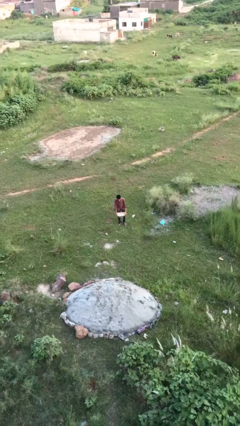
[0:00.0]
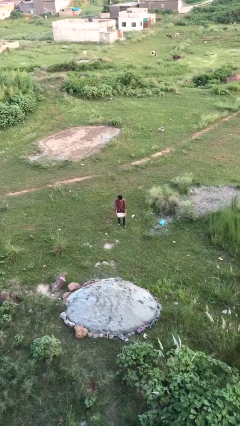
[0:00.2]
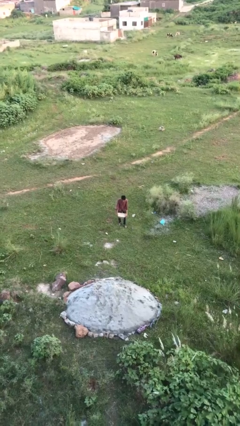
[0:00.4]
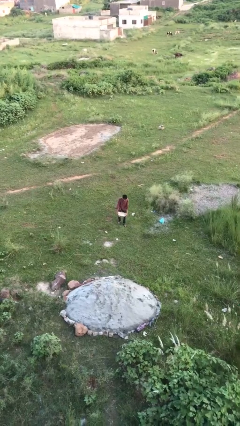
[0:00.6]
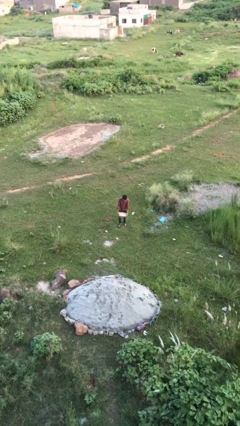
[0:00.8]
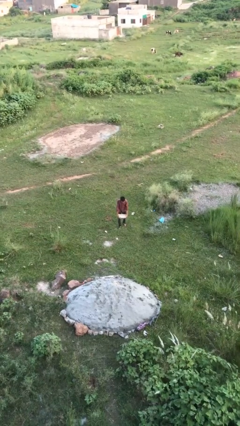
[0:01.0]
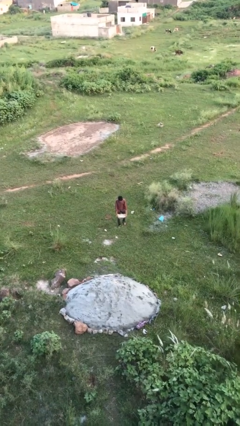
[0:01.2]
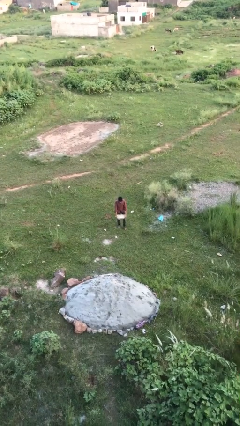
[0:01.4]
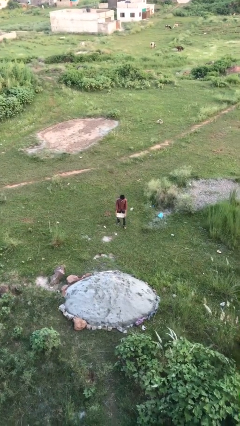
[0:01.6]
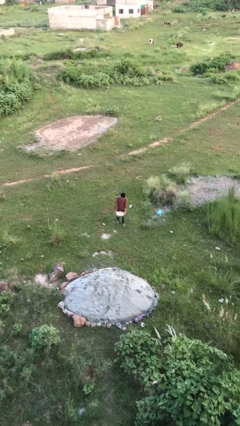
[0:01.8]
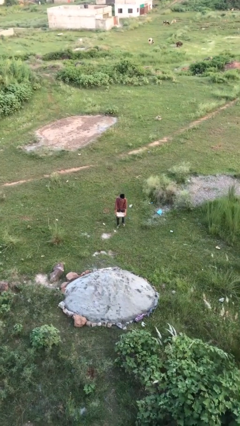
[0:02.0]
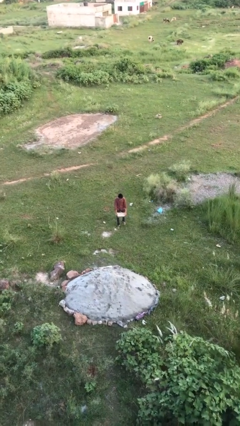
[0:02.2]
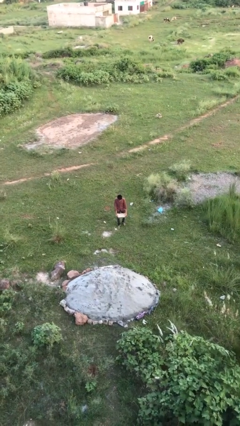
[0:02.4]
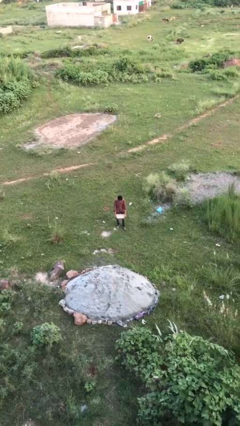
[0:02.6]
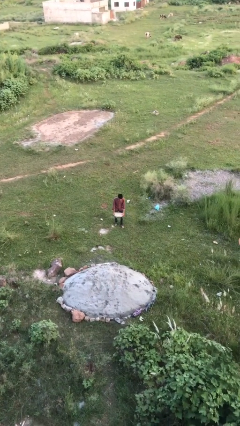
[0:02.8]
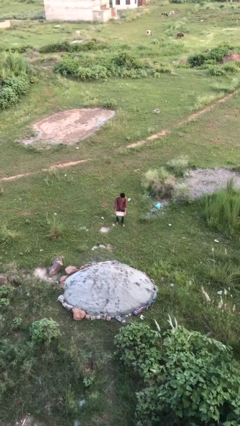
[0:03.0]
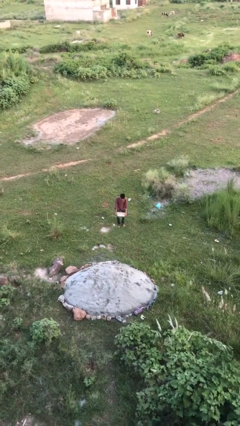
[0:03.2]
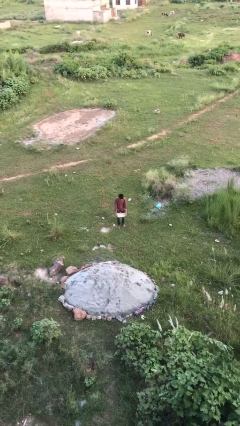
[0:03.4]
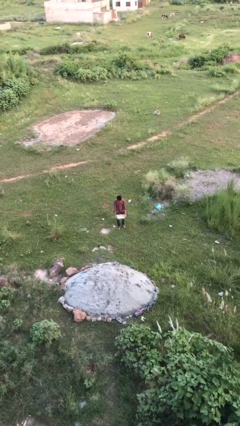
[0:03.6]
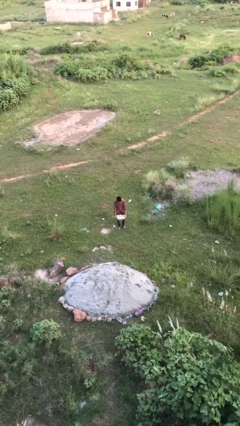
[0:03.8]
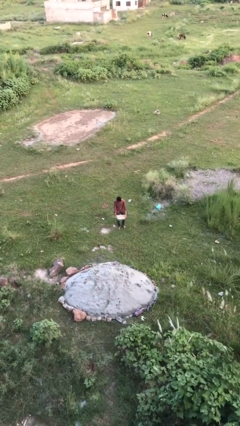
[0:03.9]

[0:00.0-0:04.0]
person carries heavy object

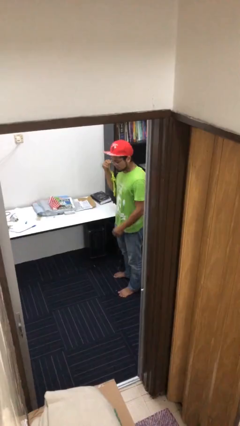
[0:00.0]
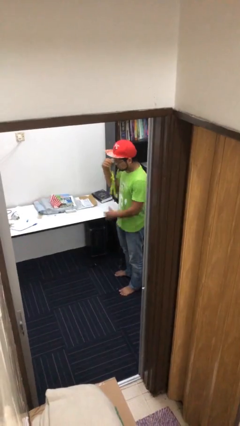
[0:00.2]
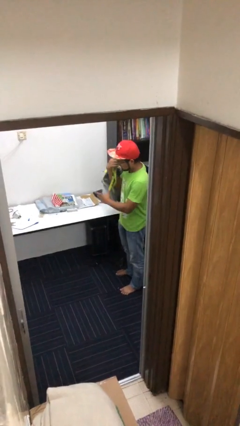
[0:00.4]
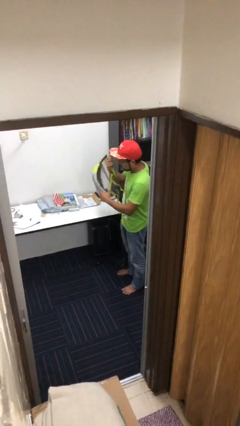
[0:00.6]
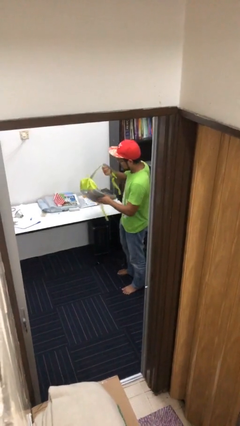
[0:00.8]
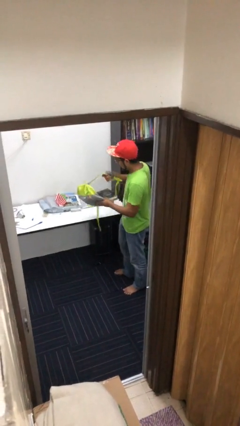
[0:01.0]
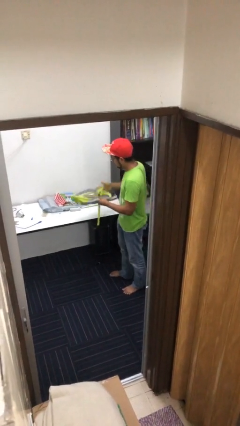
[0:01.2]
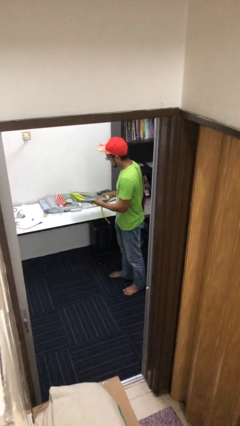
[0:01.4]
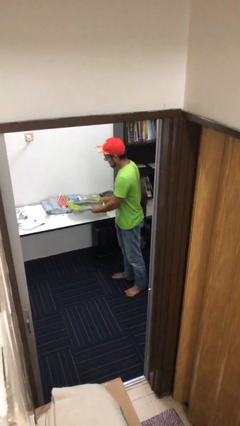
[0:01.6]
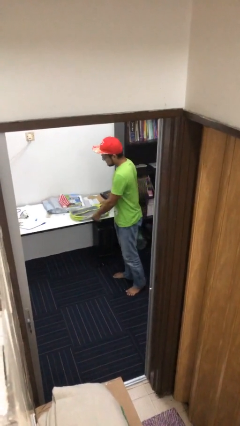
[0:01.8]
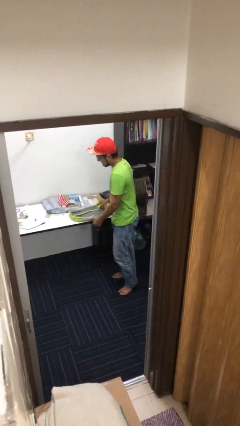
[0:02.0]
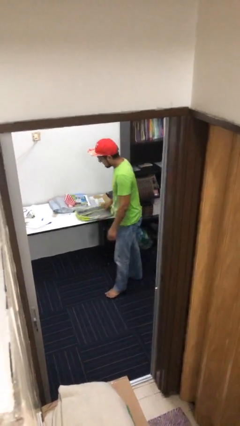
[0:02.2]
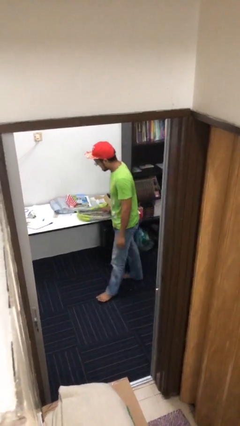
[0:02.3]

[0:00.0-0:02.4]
person puts down object on table

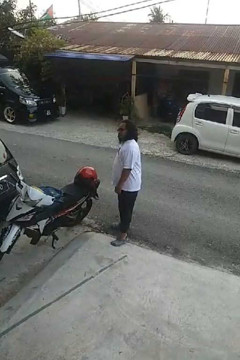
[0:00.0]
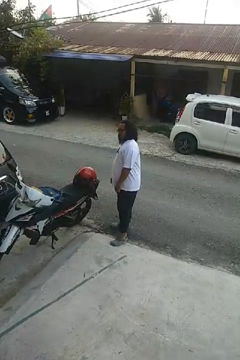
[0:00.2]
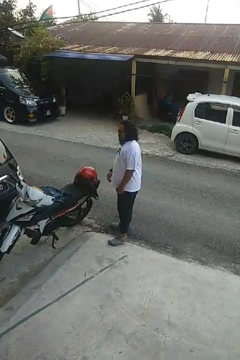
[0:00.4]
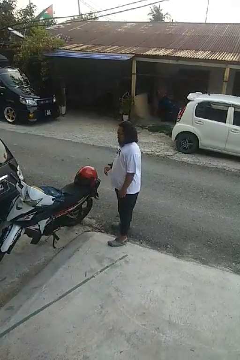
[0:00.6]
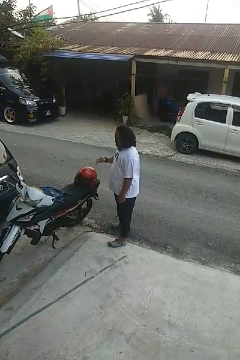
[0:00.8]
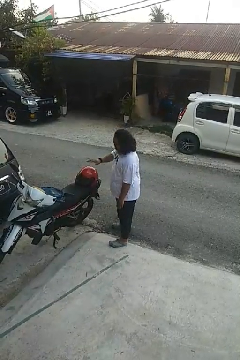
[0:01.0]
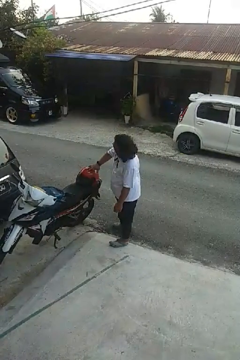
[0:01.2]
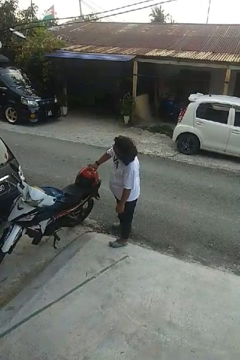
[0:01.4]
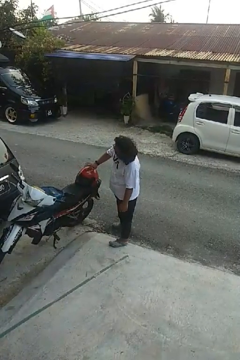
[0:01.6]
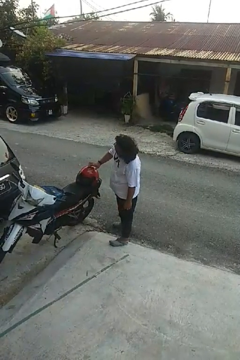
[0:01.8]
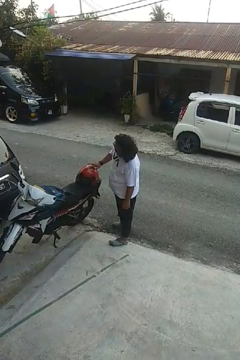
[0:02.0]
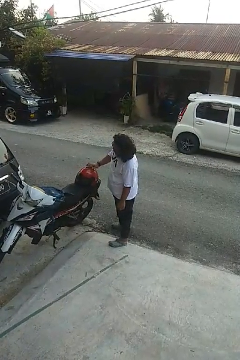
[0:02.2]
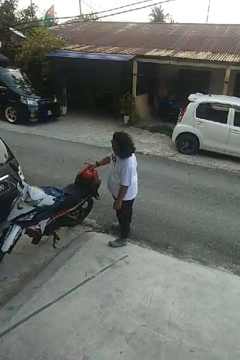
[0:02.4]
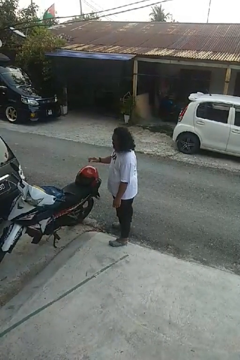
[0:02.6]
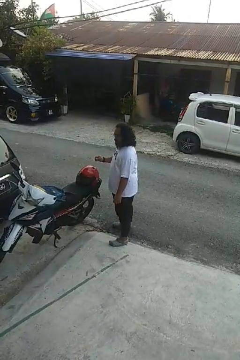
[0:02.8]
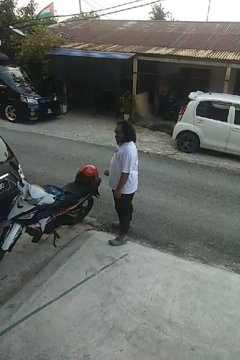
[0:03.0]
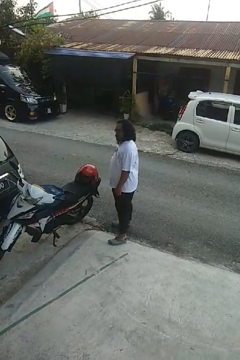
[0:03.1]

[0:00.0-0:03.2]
person taps object with finger

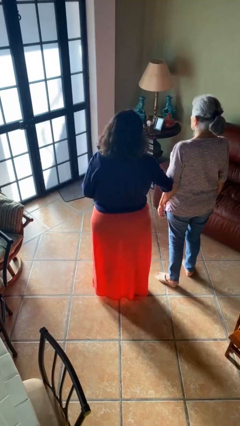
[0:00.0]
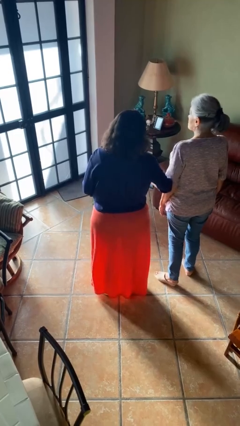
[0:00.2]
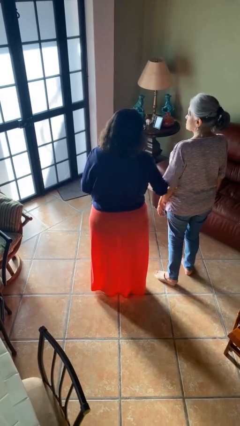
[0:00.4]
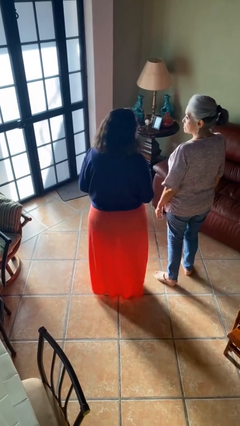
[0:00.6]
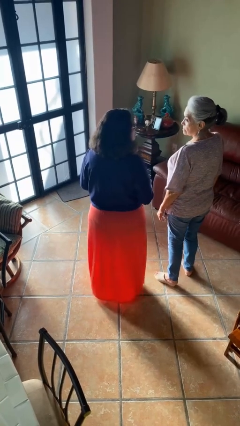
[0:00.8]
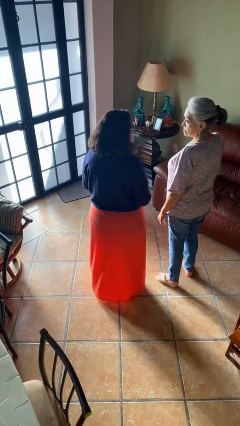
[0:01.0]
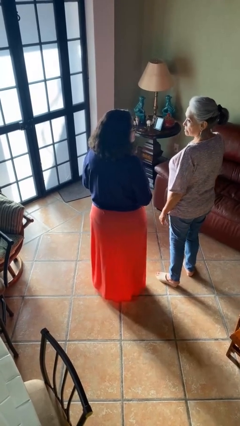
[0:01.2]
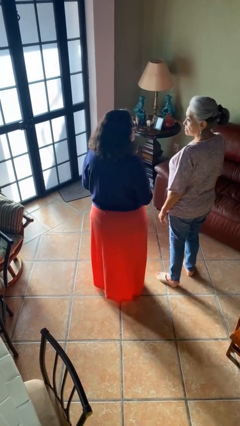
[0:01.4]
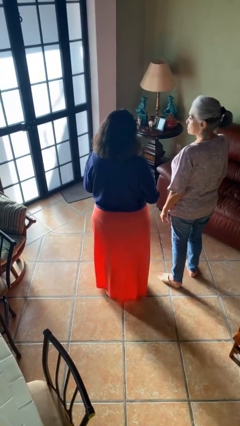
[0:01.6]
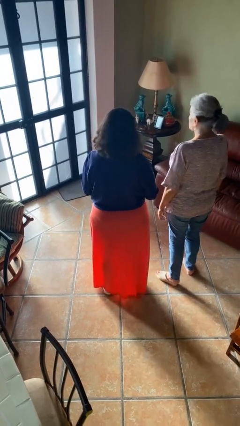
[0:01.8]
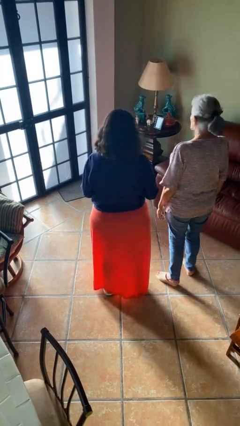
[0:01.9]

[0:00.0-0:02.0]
person nudges person with elbow

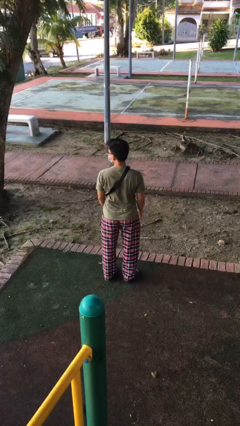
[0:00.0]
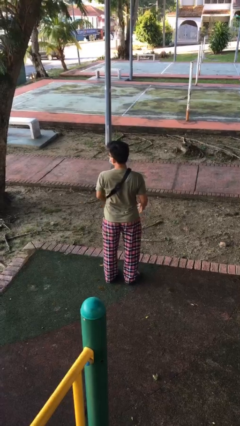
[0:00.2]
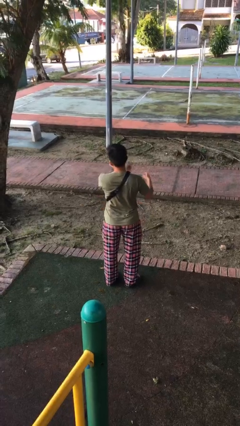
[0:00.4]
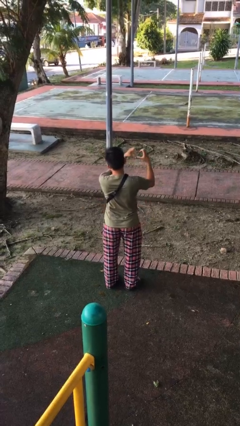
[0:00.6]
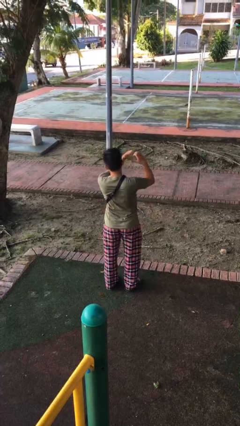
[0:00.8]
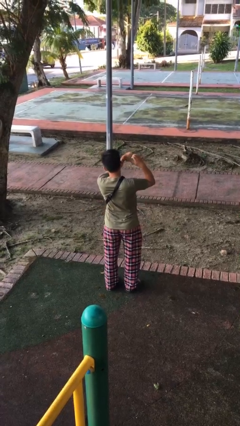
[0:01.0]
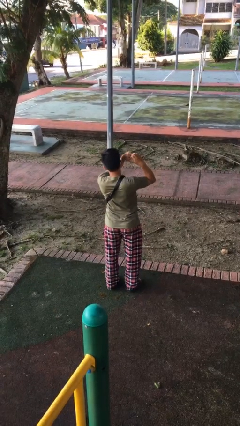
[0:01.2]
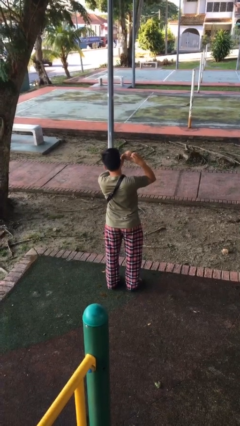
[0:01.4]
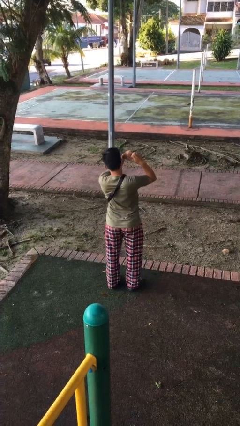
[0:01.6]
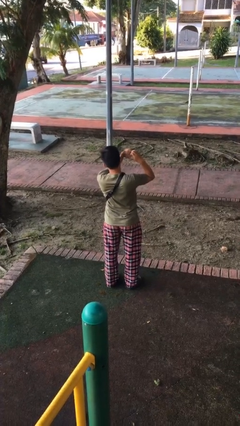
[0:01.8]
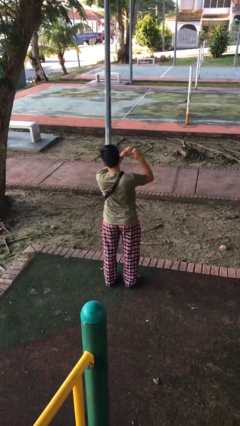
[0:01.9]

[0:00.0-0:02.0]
person gestures heart

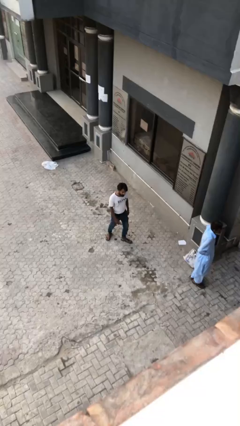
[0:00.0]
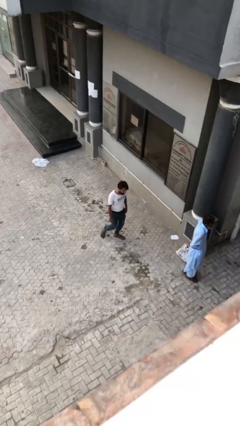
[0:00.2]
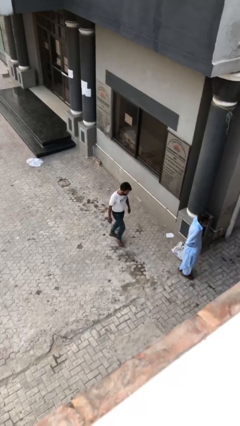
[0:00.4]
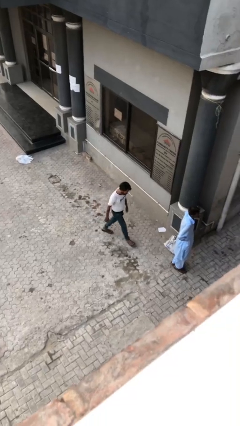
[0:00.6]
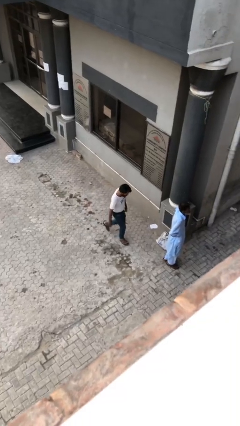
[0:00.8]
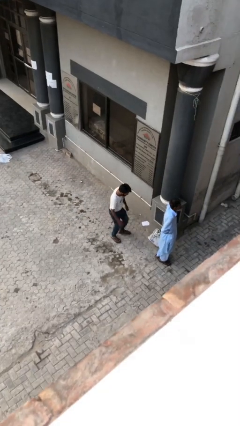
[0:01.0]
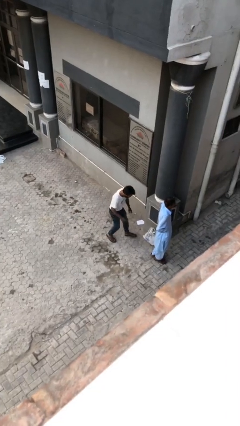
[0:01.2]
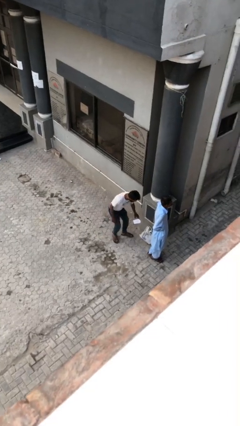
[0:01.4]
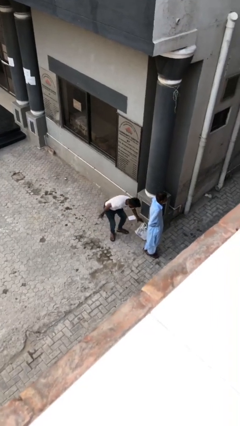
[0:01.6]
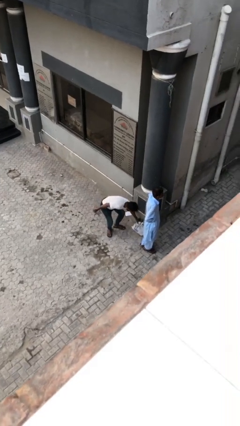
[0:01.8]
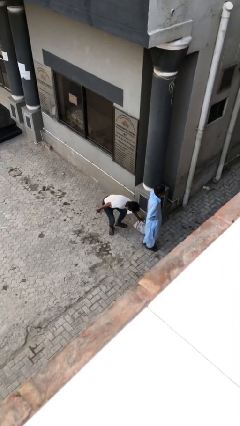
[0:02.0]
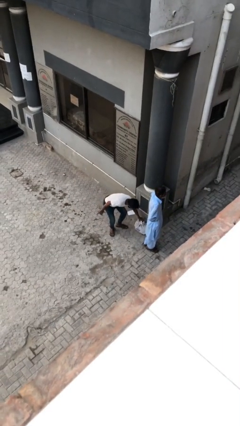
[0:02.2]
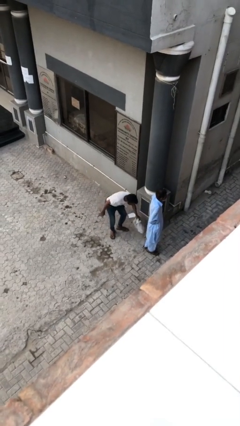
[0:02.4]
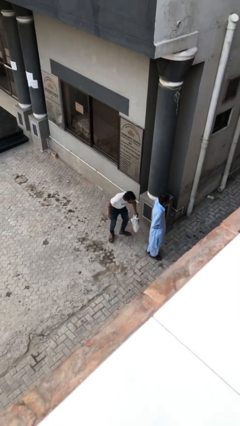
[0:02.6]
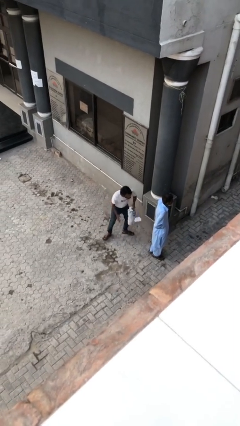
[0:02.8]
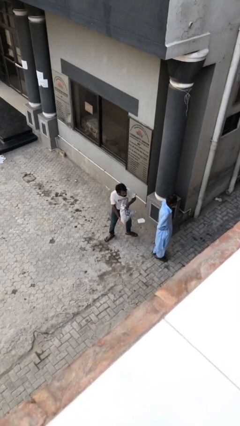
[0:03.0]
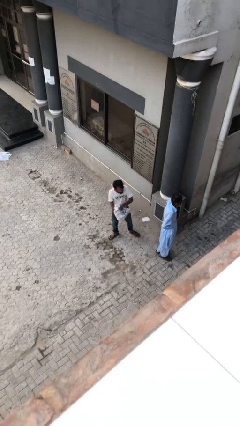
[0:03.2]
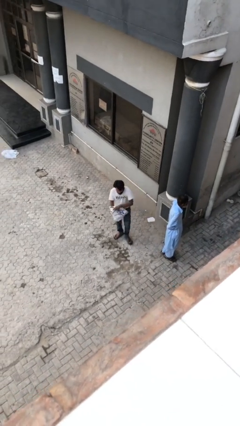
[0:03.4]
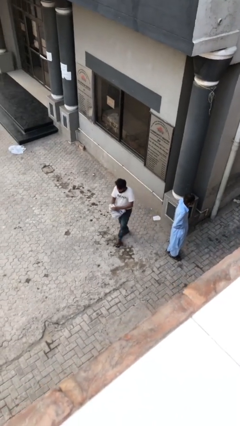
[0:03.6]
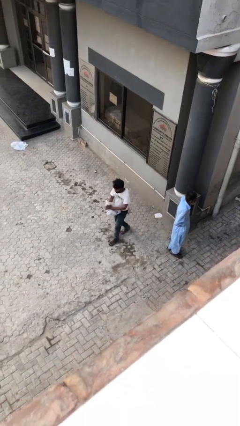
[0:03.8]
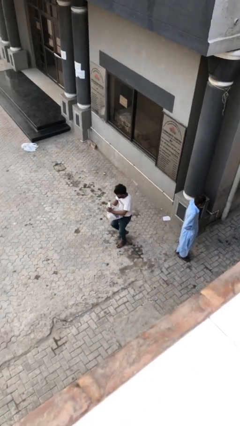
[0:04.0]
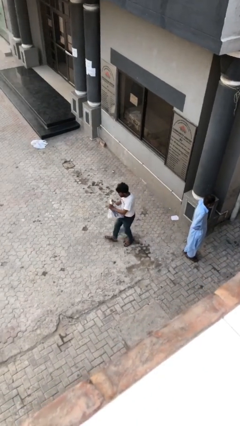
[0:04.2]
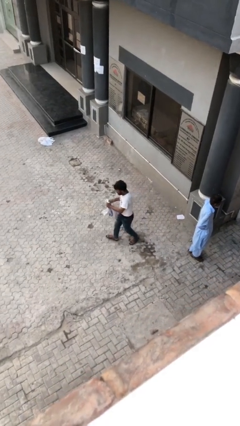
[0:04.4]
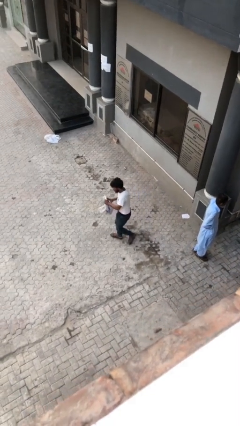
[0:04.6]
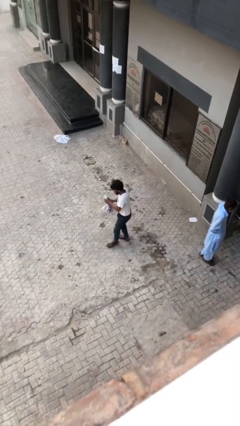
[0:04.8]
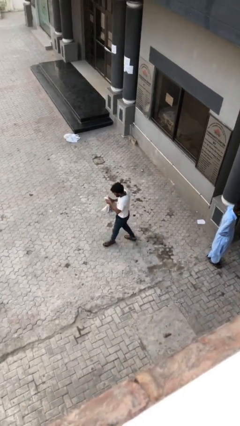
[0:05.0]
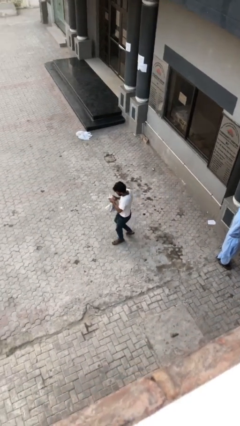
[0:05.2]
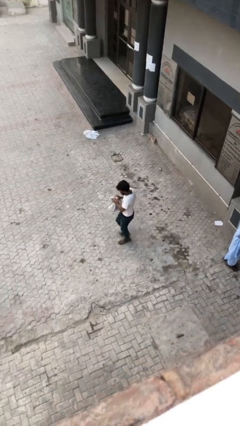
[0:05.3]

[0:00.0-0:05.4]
person steals object from person
